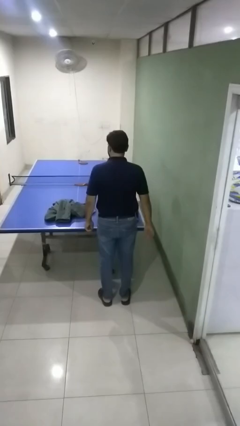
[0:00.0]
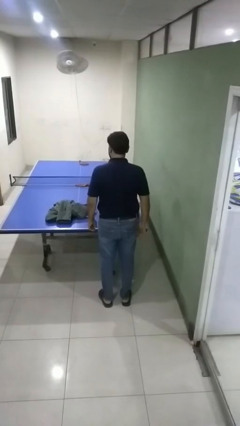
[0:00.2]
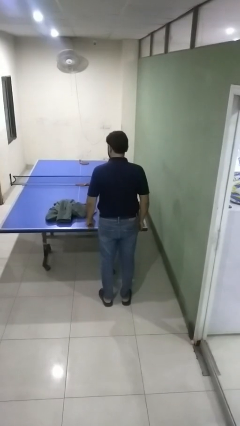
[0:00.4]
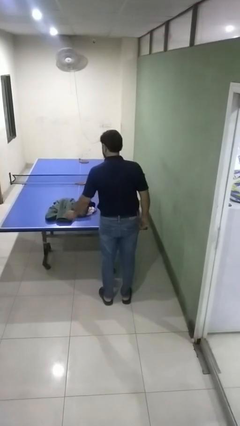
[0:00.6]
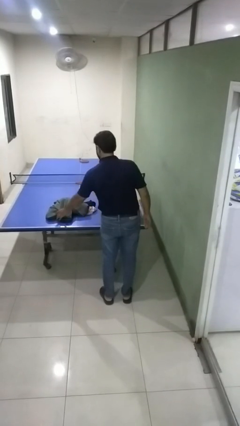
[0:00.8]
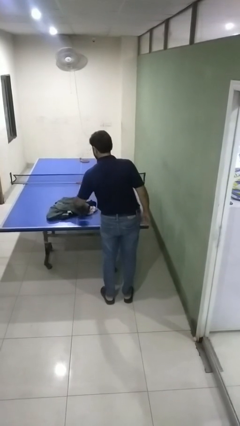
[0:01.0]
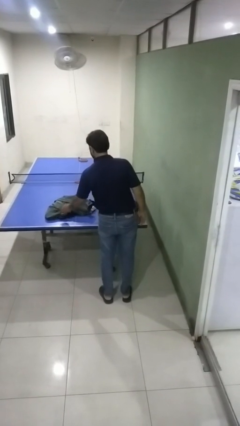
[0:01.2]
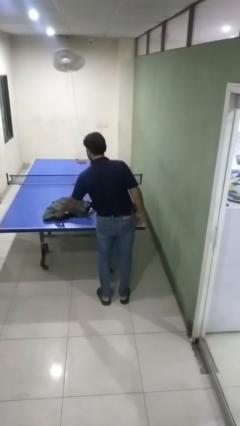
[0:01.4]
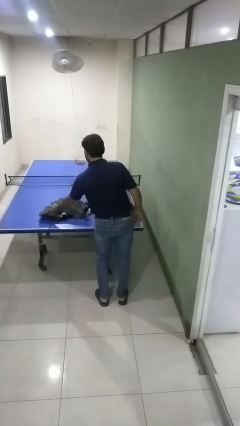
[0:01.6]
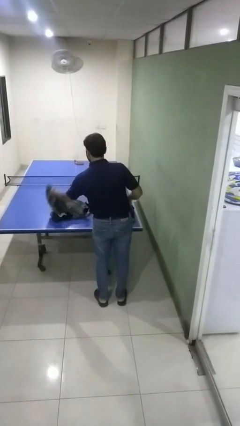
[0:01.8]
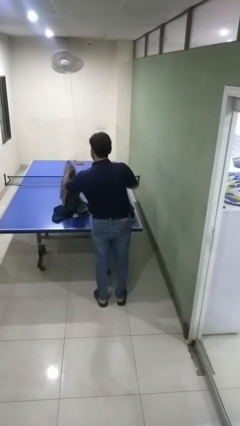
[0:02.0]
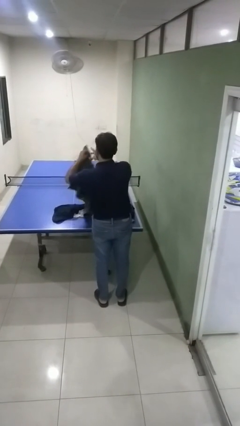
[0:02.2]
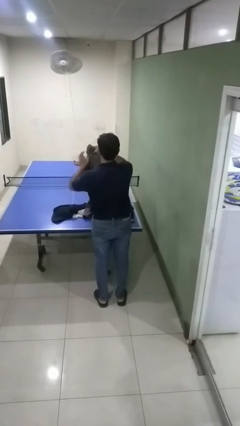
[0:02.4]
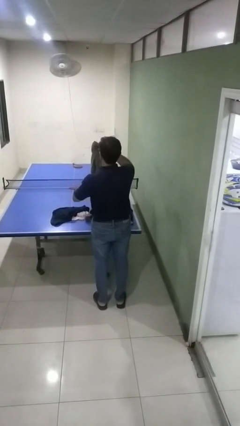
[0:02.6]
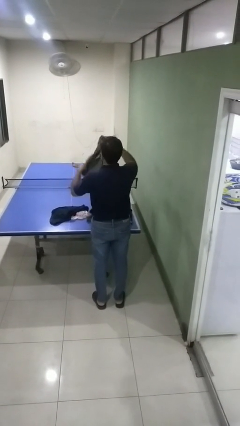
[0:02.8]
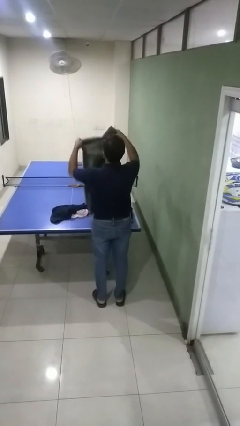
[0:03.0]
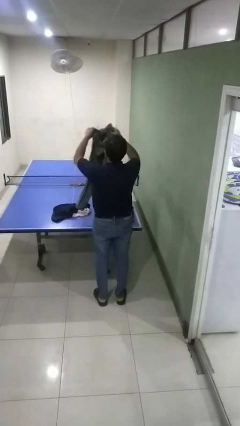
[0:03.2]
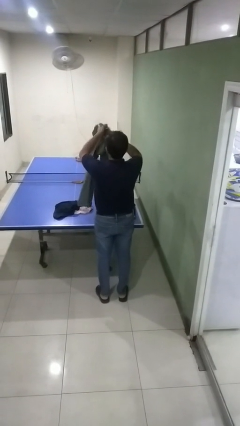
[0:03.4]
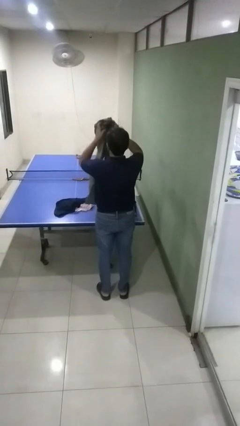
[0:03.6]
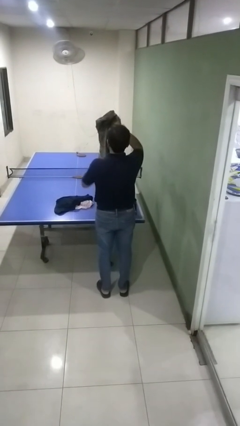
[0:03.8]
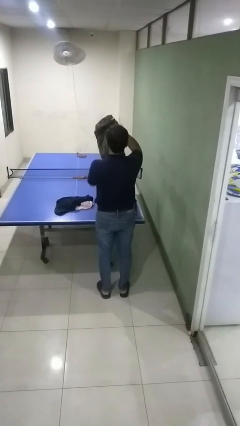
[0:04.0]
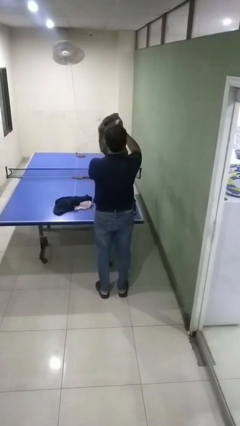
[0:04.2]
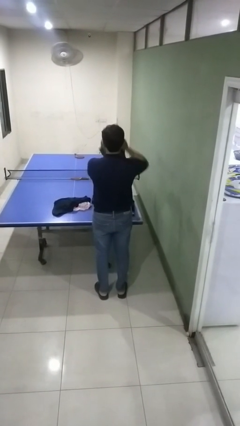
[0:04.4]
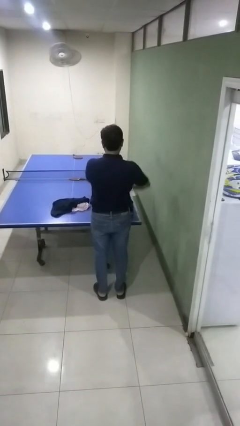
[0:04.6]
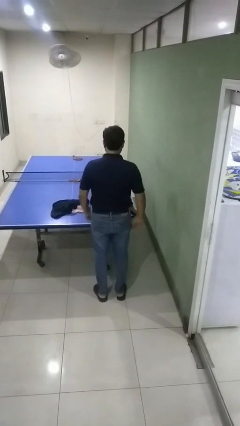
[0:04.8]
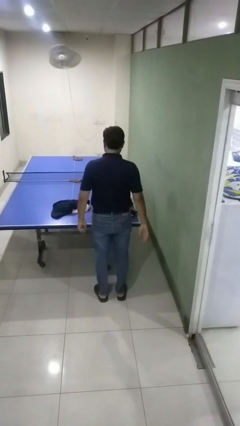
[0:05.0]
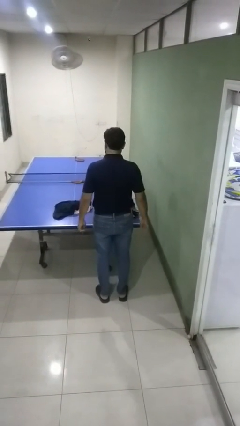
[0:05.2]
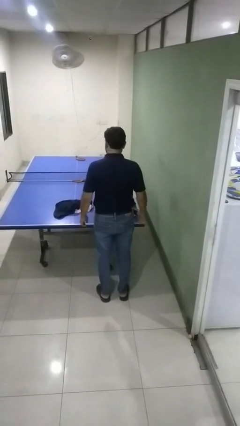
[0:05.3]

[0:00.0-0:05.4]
person folds pants

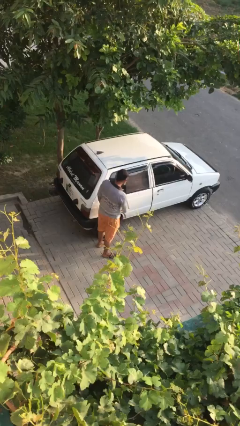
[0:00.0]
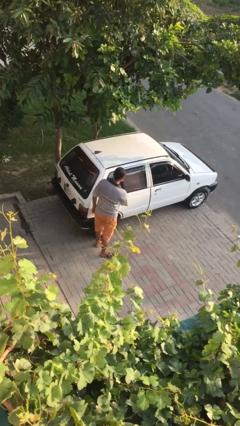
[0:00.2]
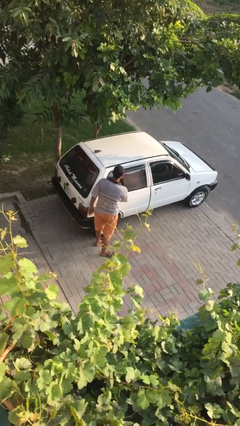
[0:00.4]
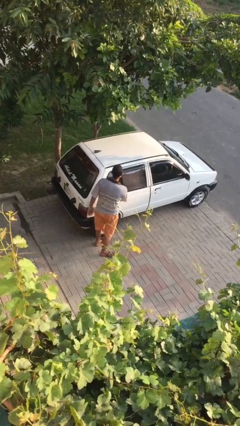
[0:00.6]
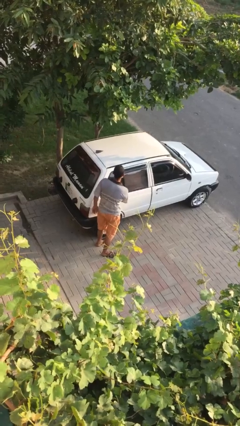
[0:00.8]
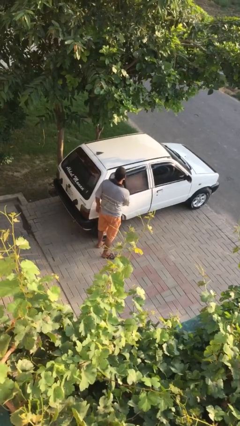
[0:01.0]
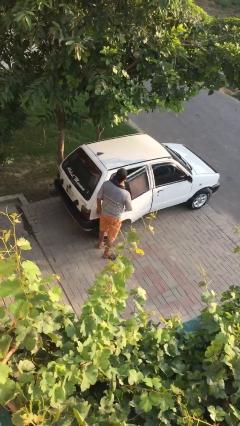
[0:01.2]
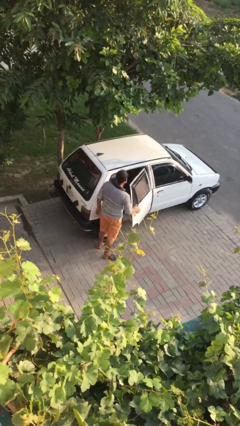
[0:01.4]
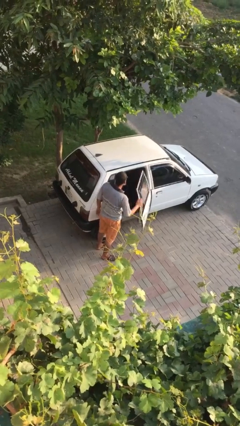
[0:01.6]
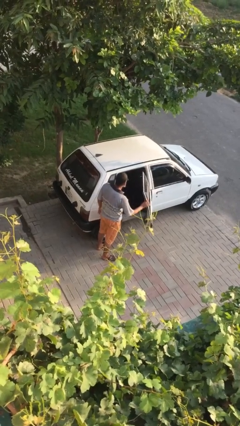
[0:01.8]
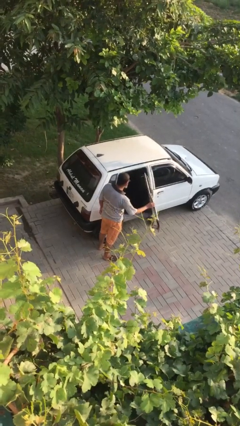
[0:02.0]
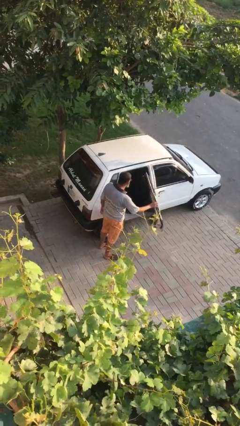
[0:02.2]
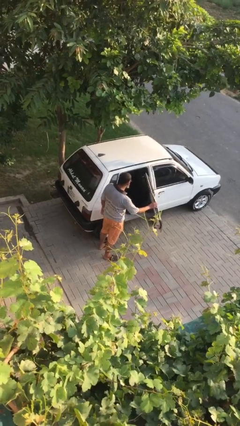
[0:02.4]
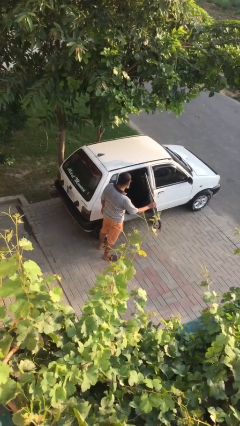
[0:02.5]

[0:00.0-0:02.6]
person opens car door

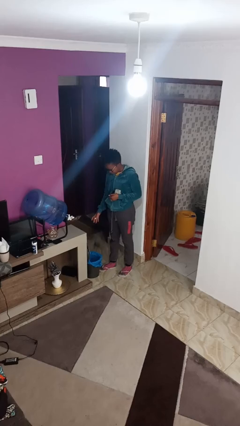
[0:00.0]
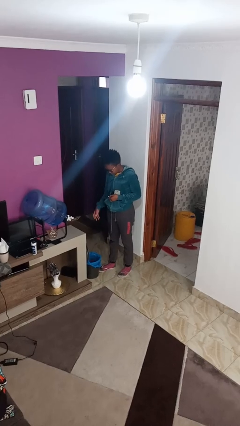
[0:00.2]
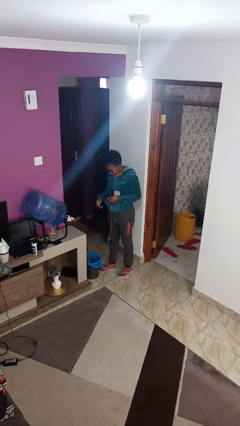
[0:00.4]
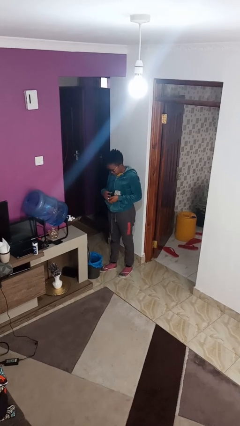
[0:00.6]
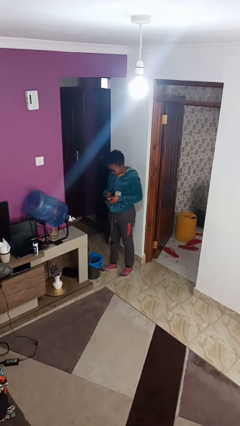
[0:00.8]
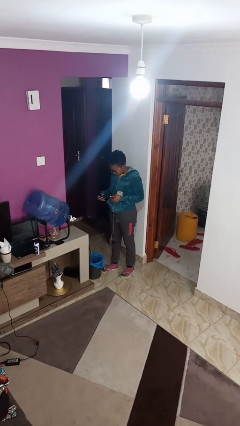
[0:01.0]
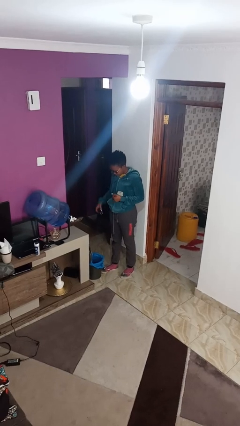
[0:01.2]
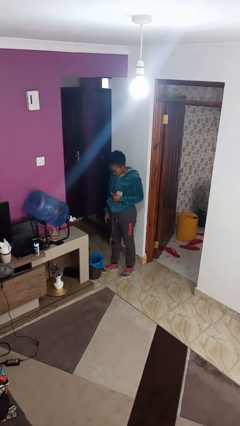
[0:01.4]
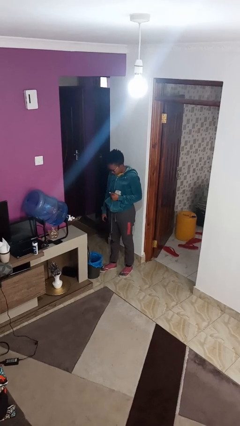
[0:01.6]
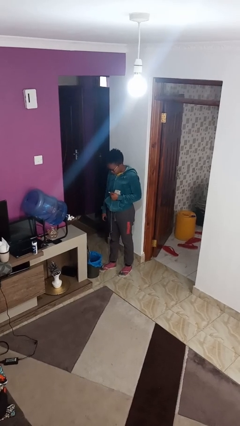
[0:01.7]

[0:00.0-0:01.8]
person discards trash

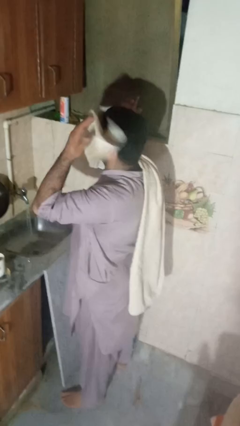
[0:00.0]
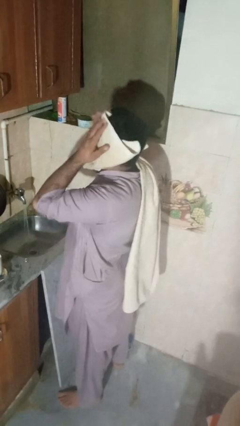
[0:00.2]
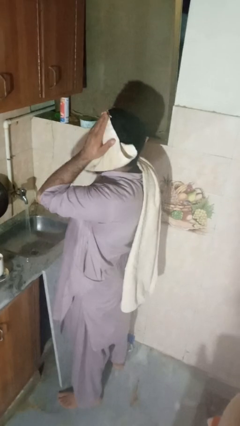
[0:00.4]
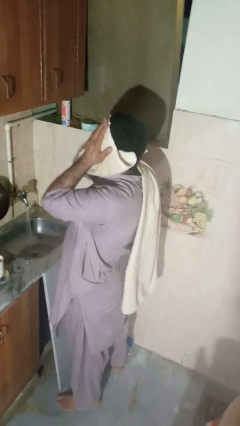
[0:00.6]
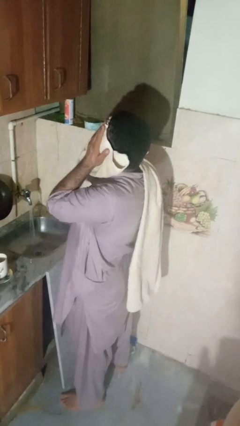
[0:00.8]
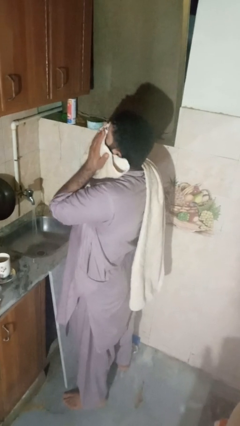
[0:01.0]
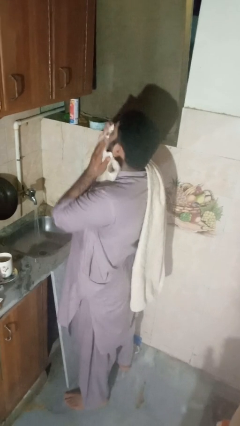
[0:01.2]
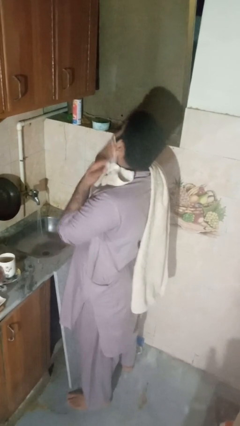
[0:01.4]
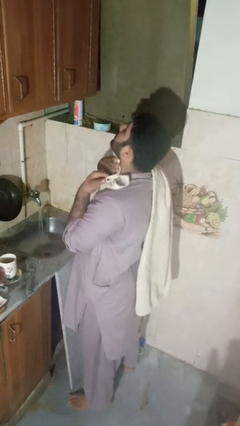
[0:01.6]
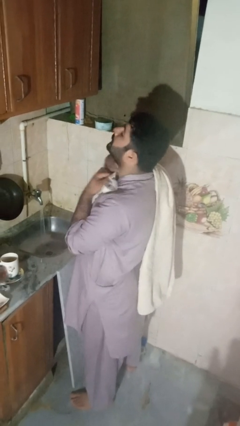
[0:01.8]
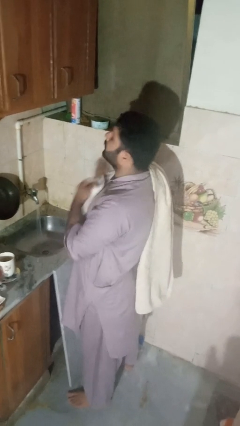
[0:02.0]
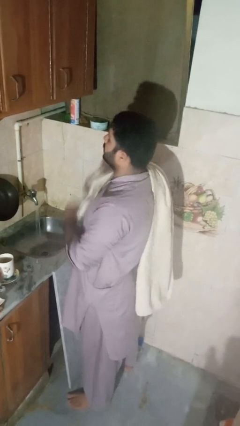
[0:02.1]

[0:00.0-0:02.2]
person dries face with towel

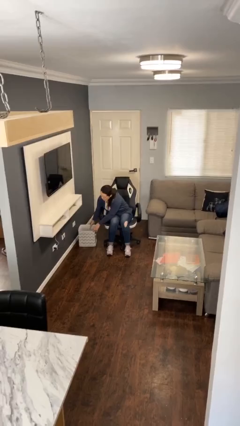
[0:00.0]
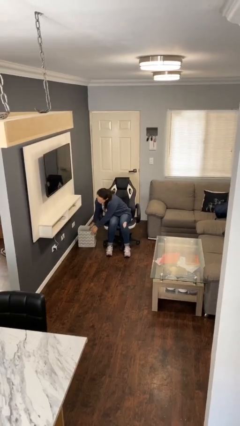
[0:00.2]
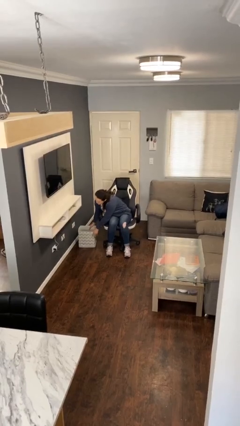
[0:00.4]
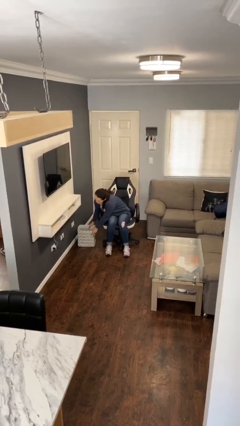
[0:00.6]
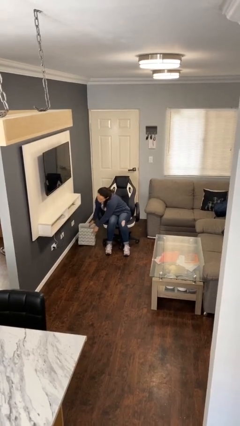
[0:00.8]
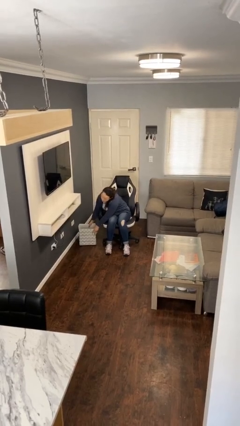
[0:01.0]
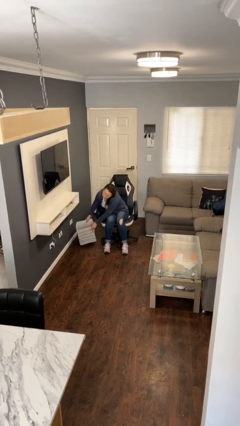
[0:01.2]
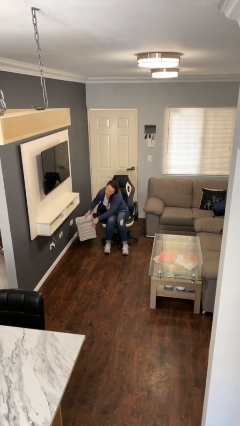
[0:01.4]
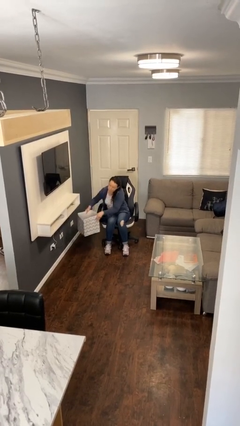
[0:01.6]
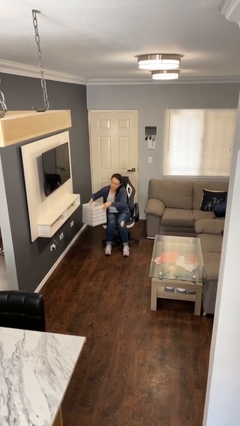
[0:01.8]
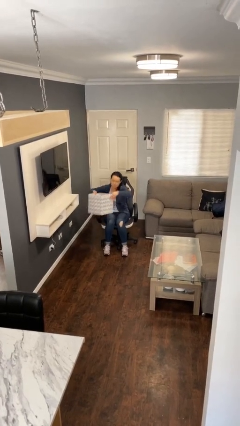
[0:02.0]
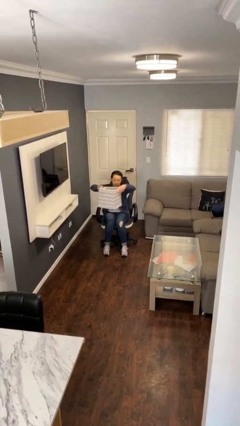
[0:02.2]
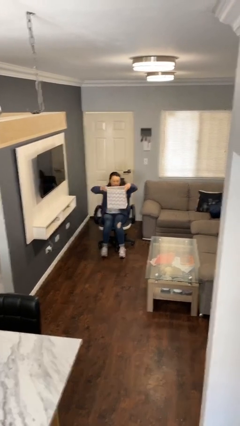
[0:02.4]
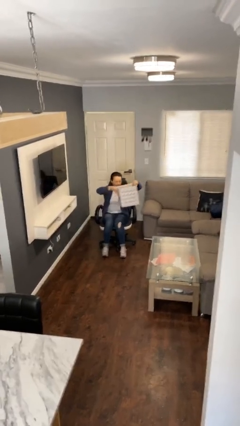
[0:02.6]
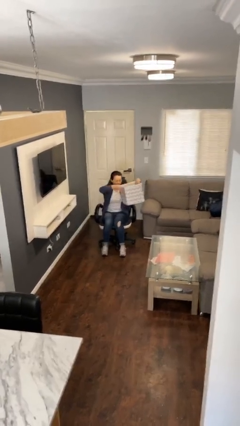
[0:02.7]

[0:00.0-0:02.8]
person picks up object from floor

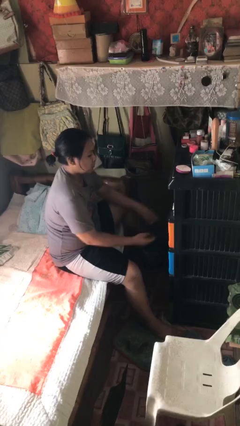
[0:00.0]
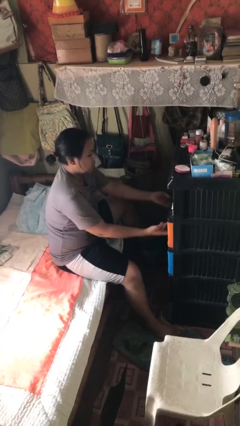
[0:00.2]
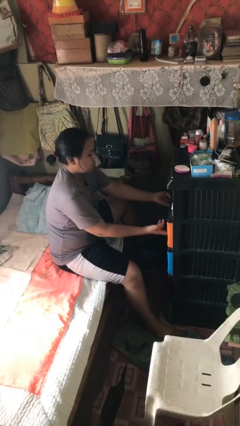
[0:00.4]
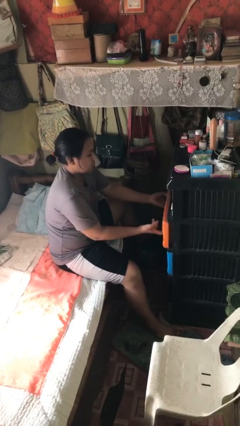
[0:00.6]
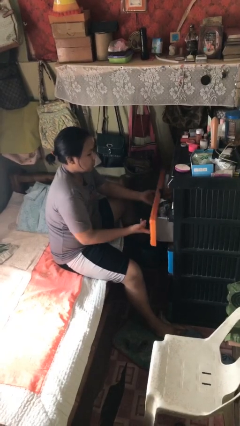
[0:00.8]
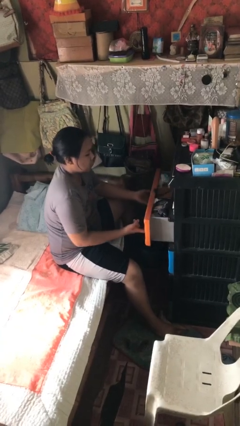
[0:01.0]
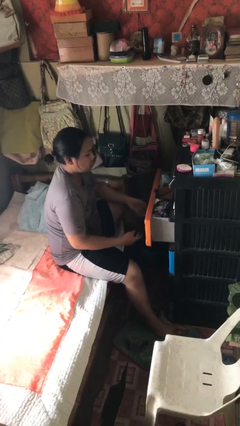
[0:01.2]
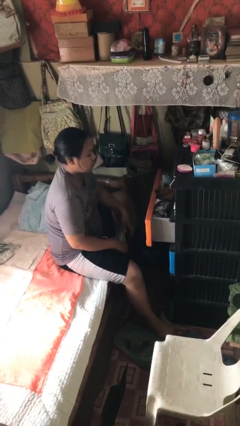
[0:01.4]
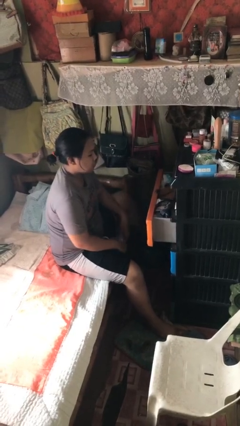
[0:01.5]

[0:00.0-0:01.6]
person opens dresser drawer

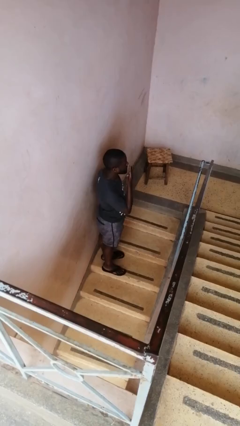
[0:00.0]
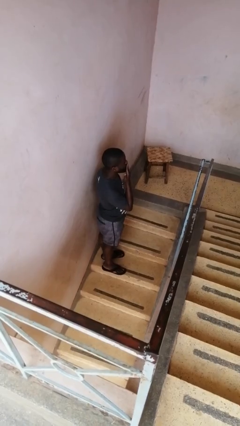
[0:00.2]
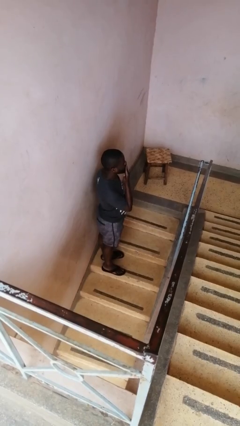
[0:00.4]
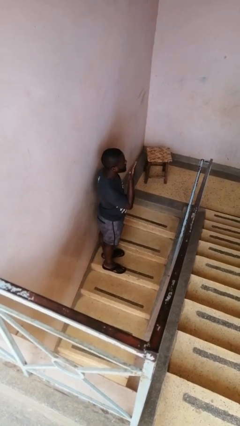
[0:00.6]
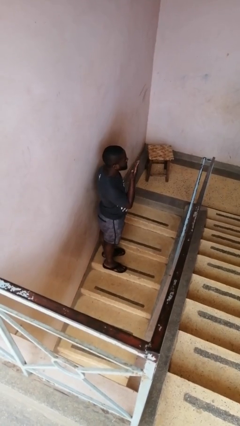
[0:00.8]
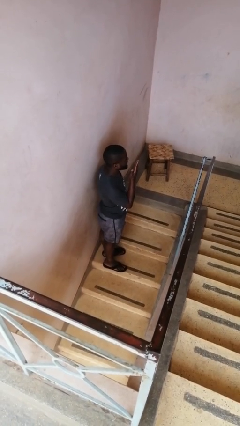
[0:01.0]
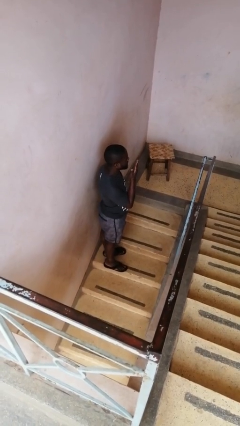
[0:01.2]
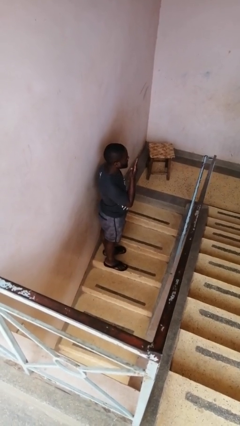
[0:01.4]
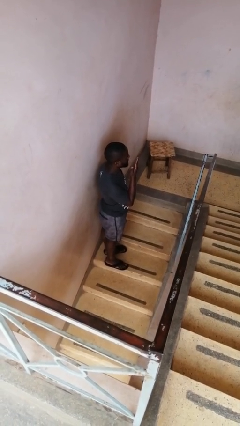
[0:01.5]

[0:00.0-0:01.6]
person gestures blow kiss
